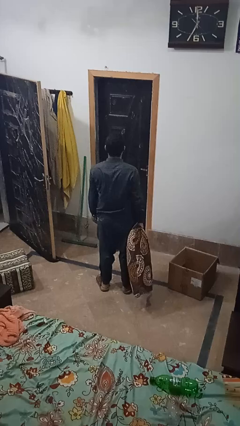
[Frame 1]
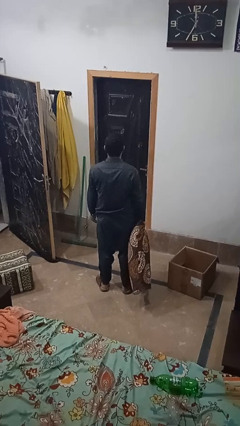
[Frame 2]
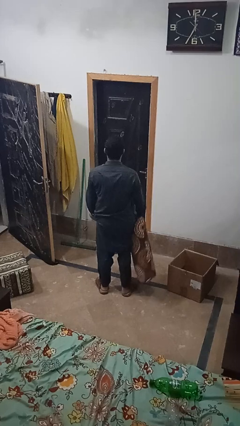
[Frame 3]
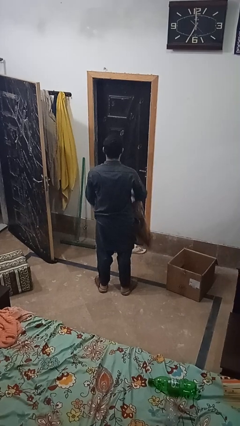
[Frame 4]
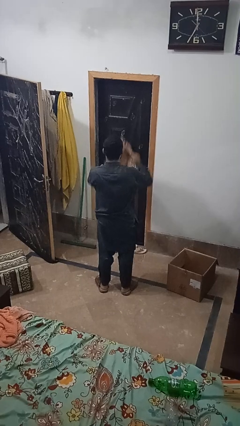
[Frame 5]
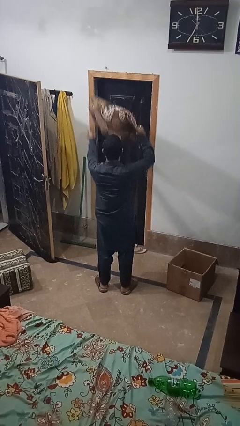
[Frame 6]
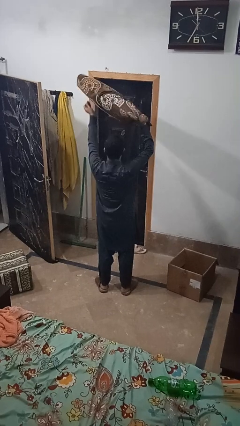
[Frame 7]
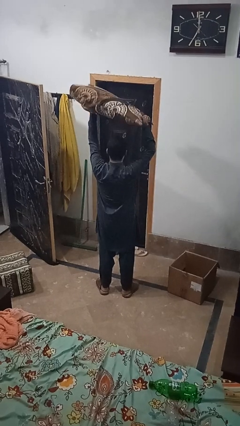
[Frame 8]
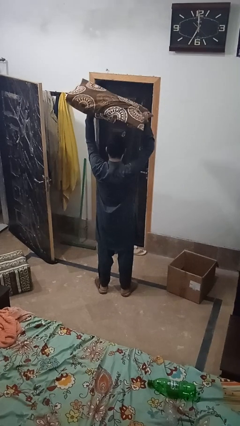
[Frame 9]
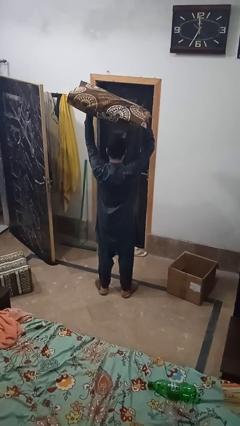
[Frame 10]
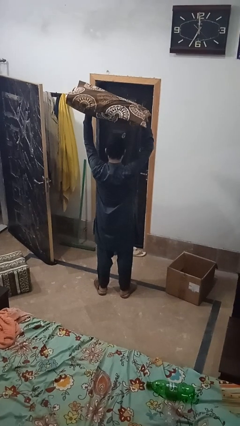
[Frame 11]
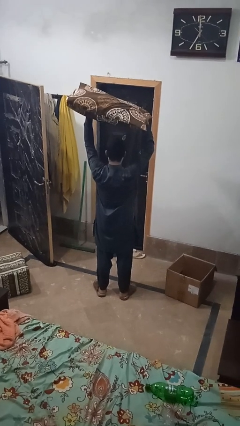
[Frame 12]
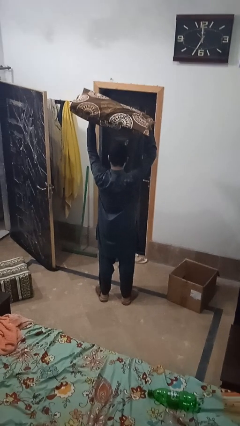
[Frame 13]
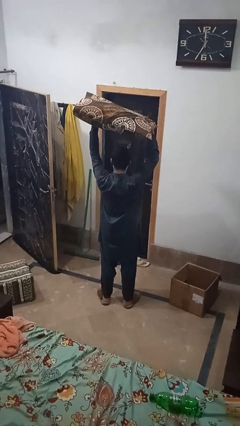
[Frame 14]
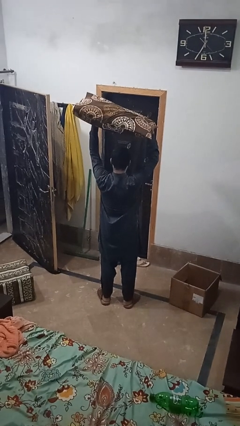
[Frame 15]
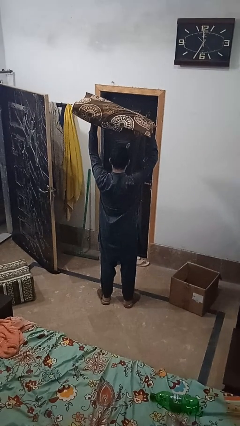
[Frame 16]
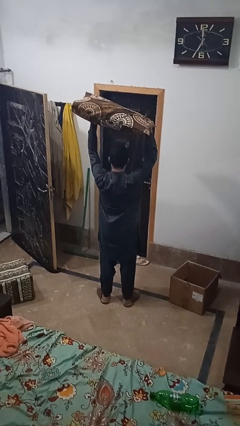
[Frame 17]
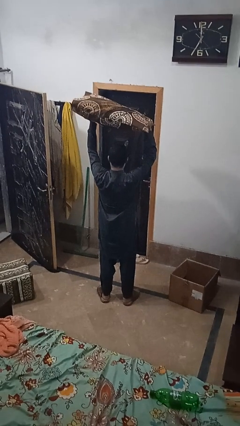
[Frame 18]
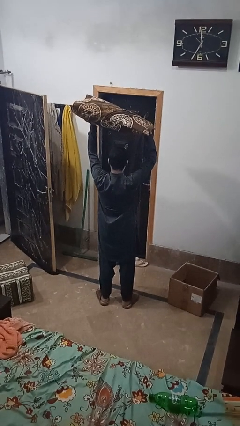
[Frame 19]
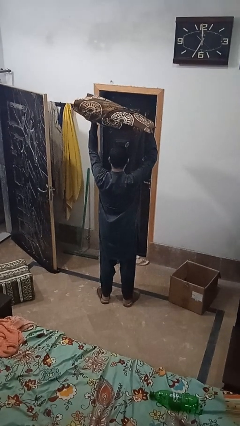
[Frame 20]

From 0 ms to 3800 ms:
person holds object above head

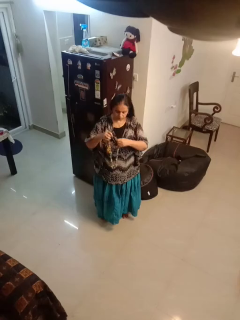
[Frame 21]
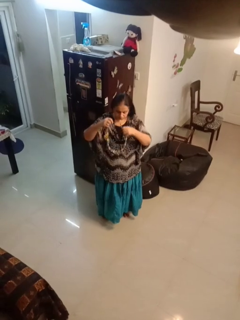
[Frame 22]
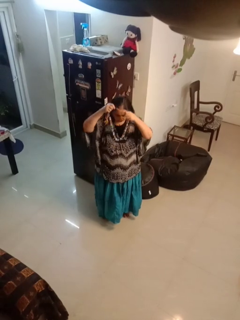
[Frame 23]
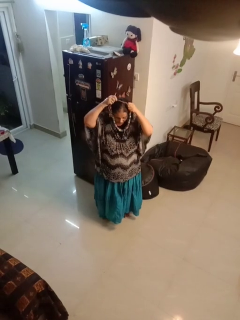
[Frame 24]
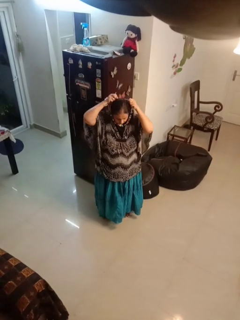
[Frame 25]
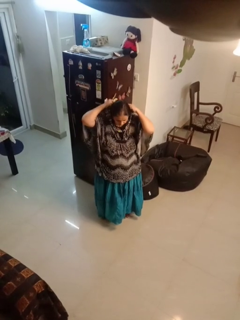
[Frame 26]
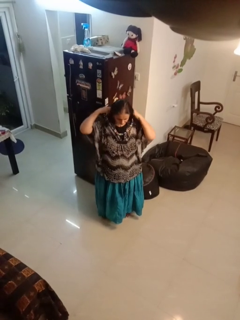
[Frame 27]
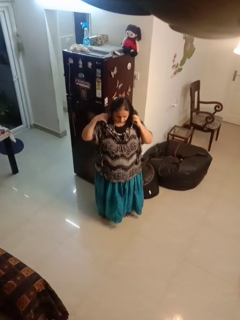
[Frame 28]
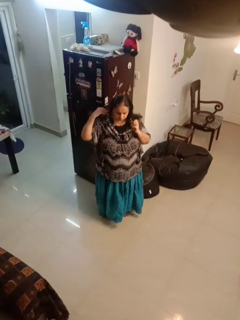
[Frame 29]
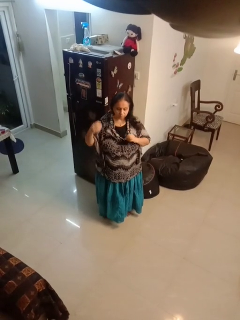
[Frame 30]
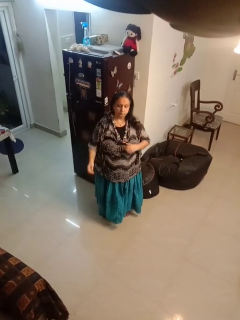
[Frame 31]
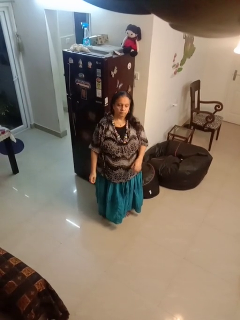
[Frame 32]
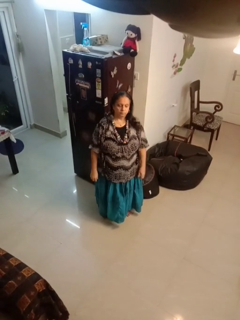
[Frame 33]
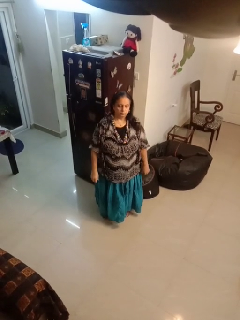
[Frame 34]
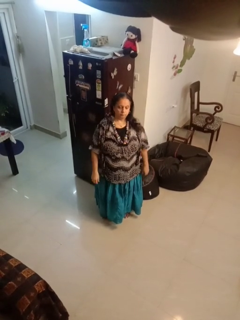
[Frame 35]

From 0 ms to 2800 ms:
person puts on necklace

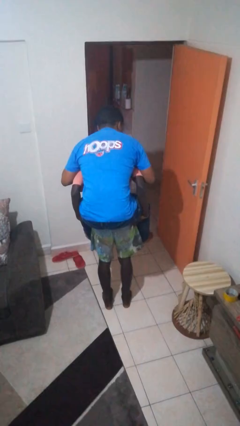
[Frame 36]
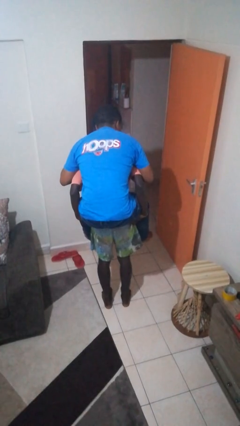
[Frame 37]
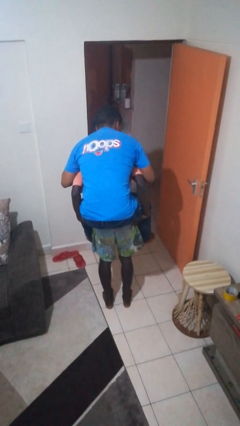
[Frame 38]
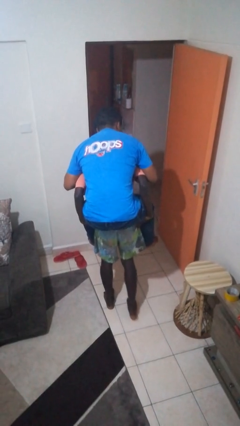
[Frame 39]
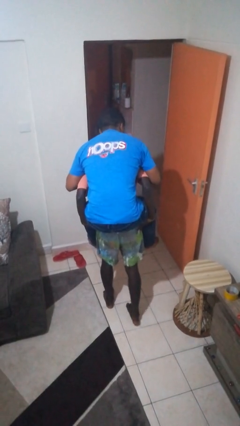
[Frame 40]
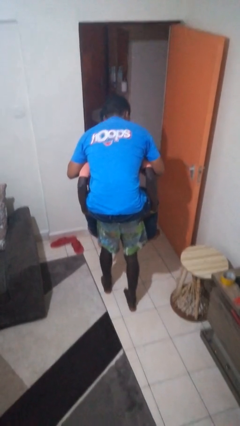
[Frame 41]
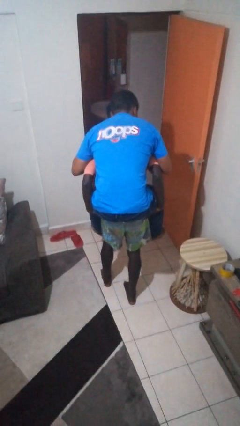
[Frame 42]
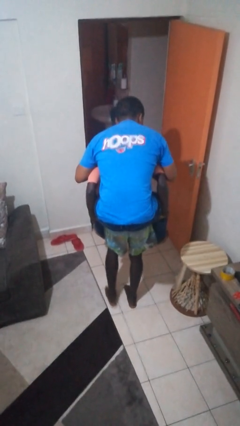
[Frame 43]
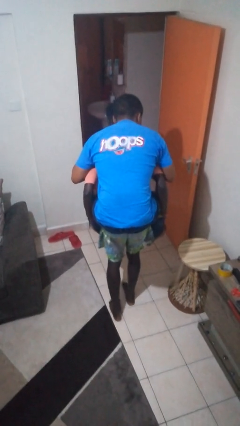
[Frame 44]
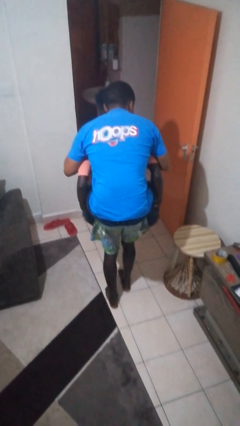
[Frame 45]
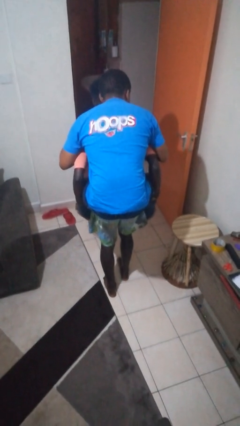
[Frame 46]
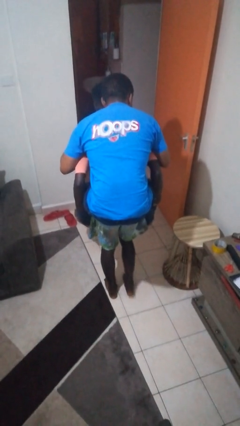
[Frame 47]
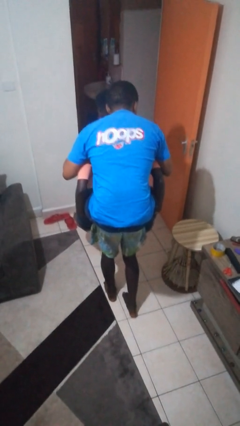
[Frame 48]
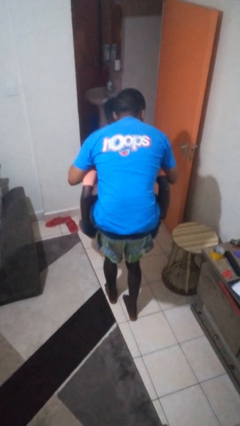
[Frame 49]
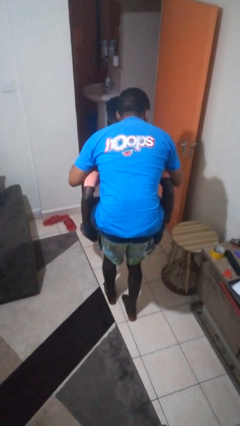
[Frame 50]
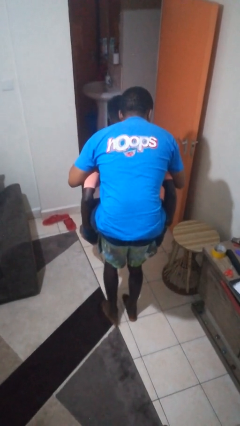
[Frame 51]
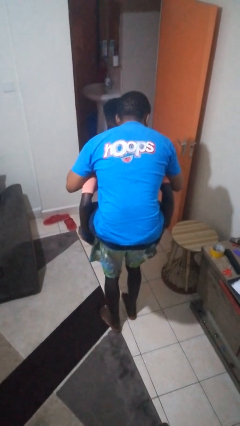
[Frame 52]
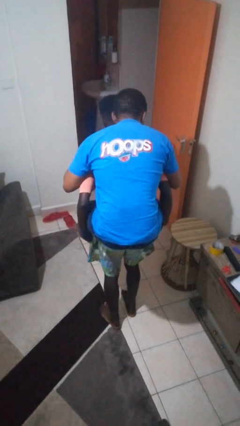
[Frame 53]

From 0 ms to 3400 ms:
person carries person on back

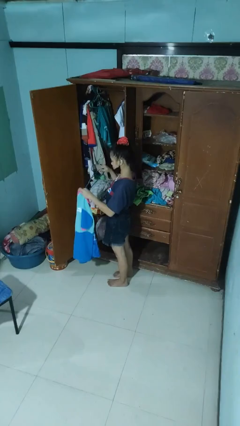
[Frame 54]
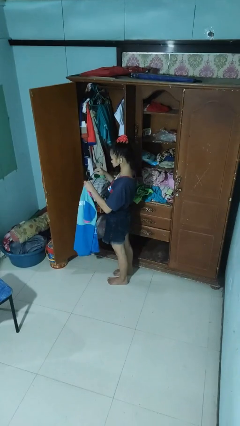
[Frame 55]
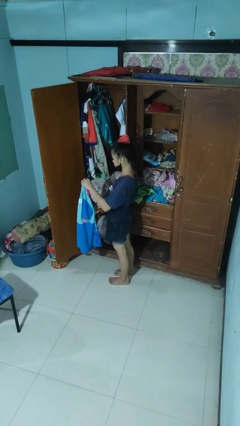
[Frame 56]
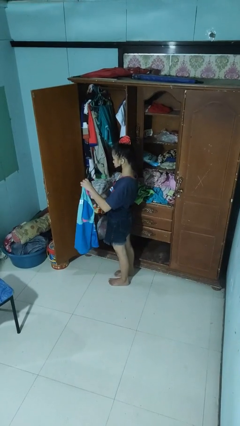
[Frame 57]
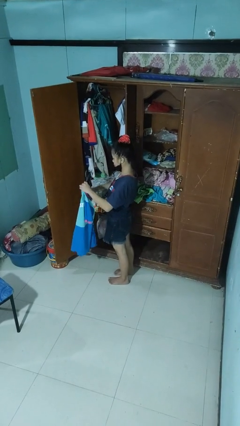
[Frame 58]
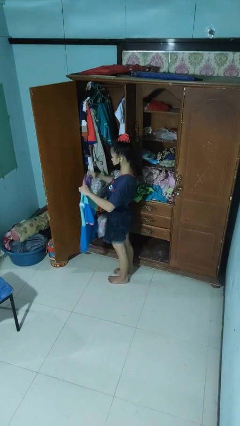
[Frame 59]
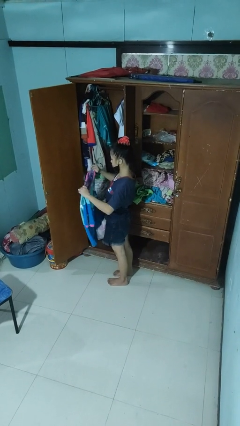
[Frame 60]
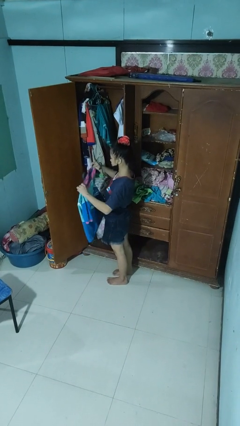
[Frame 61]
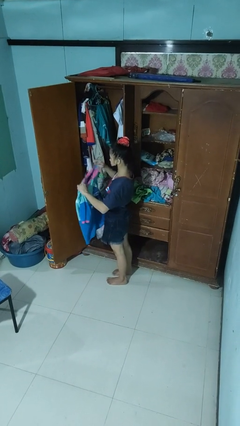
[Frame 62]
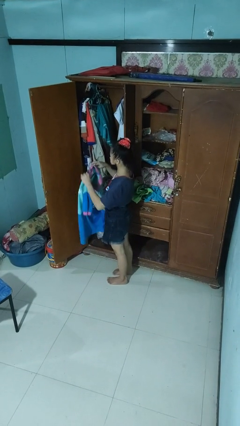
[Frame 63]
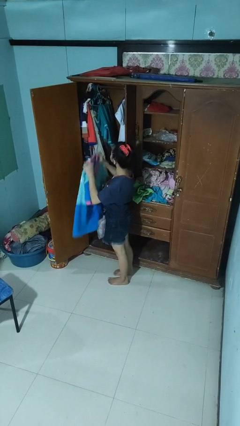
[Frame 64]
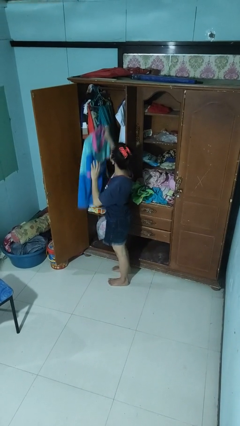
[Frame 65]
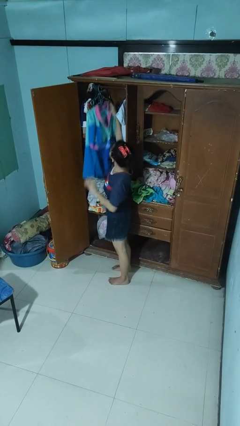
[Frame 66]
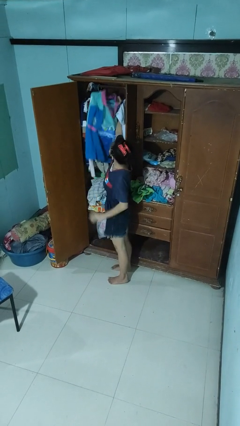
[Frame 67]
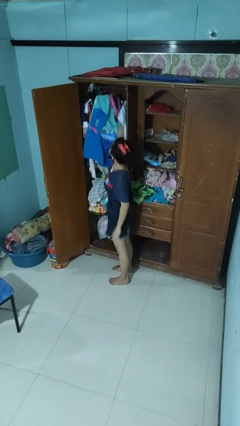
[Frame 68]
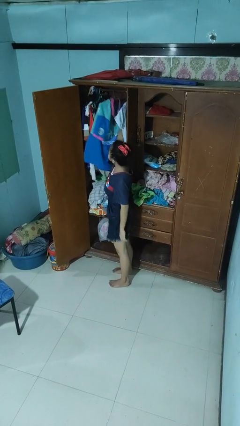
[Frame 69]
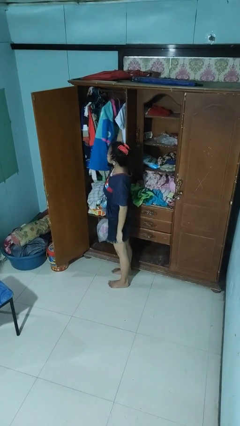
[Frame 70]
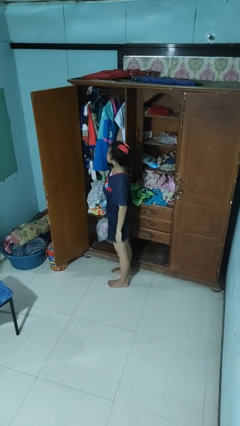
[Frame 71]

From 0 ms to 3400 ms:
person puts clothes into closet

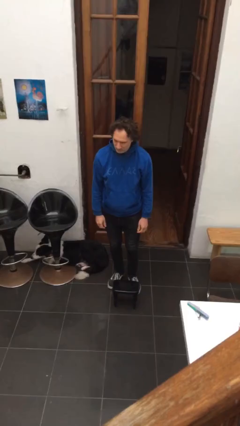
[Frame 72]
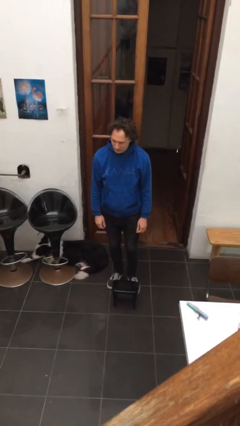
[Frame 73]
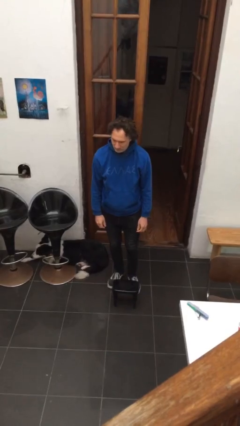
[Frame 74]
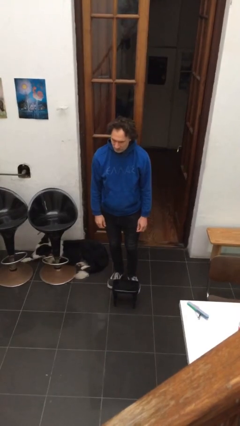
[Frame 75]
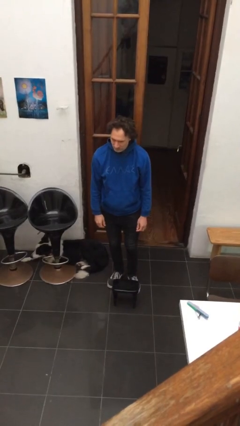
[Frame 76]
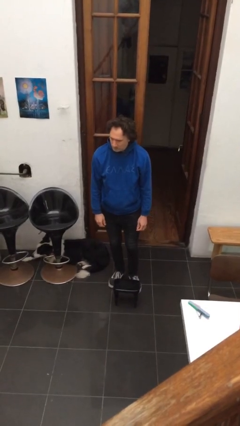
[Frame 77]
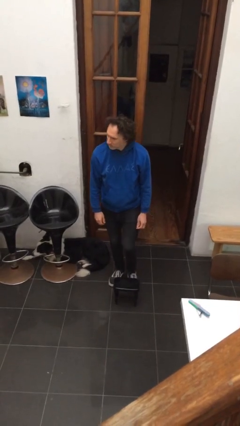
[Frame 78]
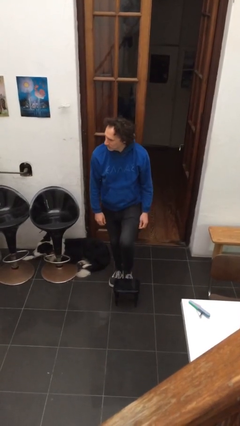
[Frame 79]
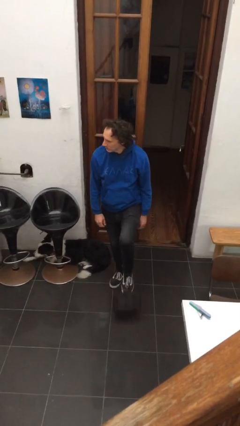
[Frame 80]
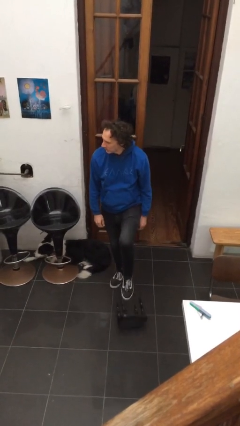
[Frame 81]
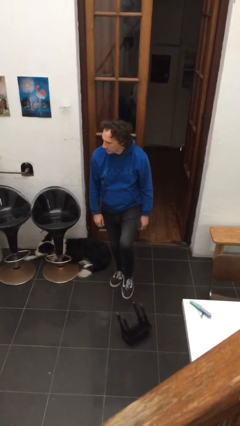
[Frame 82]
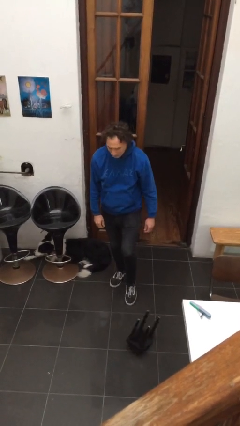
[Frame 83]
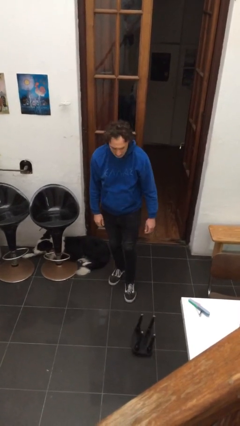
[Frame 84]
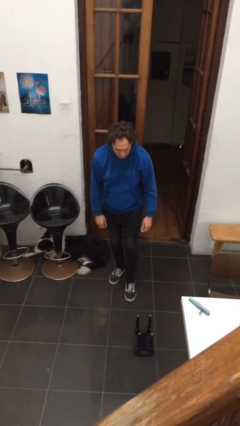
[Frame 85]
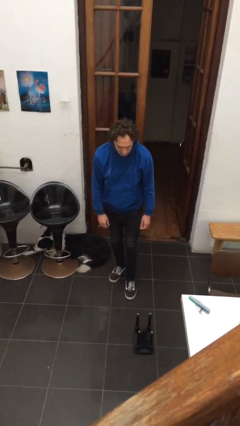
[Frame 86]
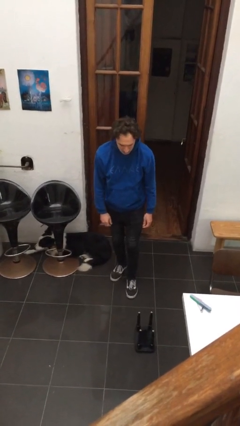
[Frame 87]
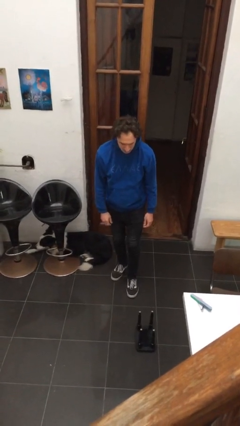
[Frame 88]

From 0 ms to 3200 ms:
person knocks over furniture

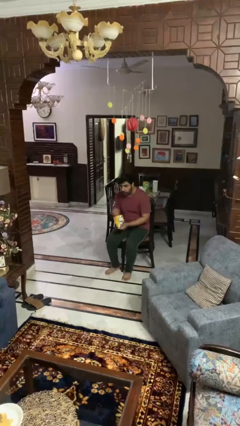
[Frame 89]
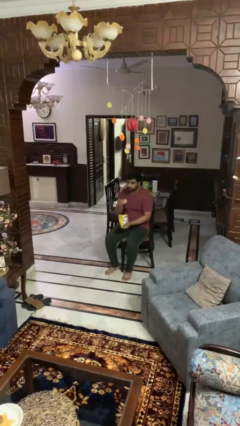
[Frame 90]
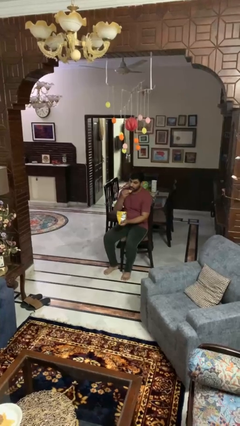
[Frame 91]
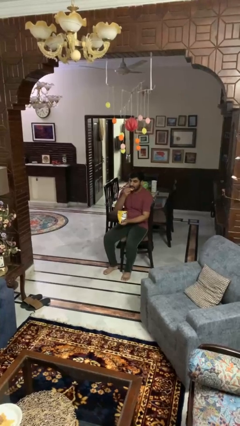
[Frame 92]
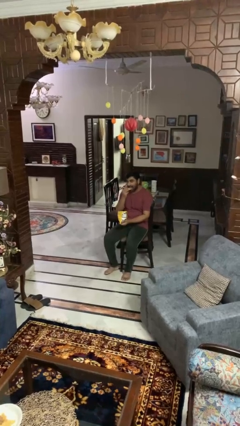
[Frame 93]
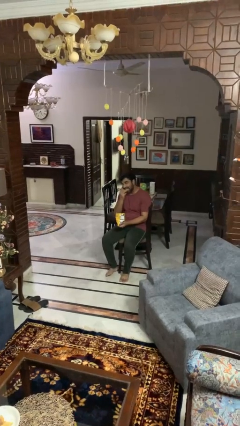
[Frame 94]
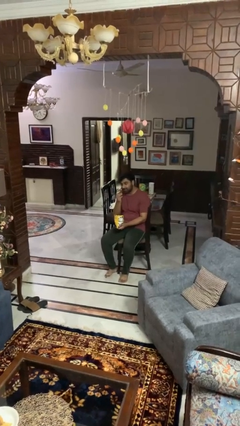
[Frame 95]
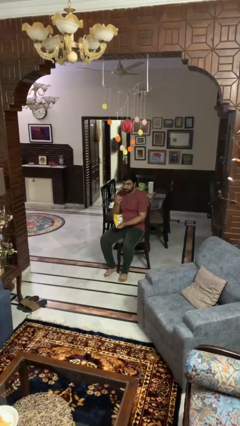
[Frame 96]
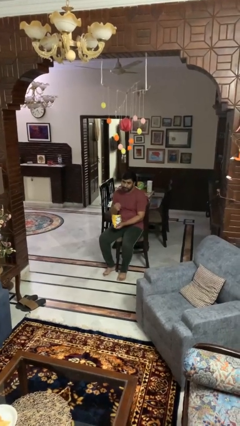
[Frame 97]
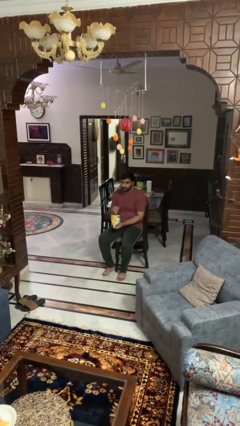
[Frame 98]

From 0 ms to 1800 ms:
person eats snack from bag
